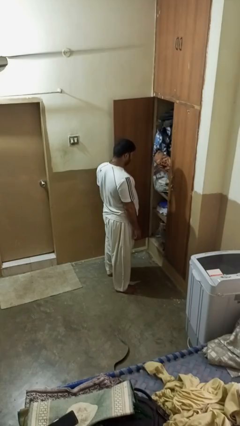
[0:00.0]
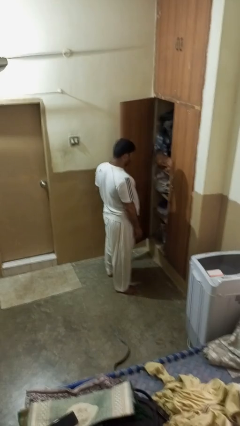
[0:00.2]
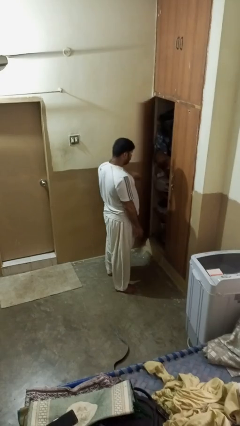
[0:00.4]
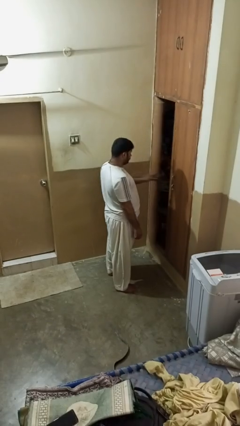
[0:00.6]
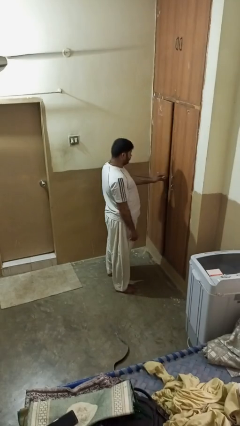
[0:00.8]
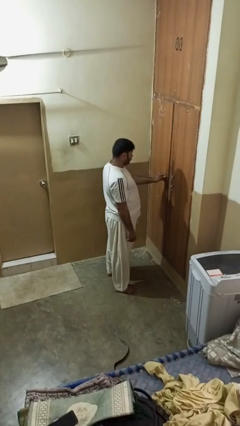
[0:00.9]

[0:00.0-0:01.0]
person closes closet door

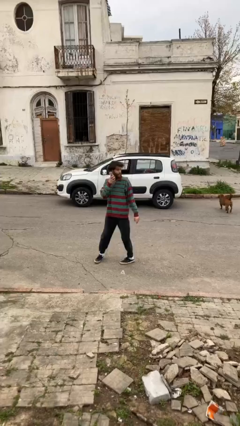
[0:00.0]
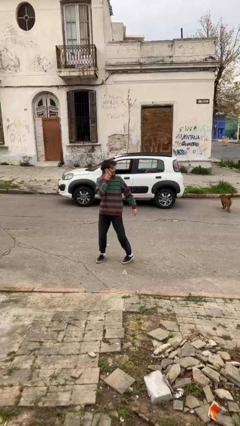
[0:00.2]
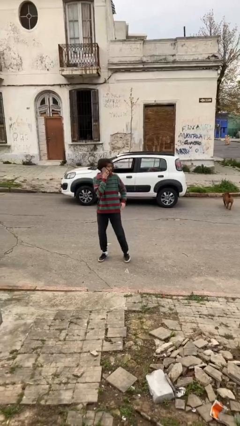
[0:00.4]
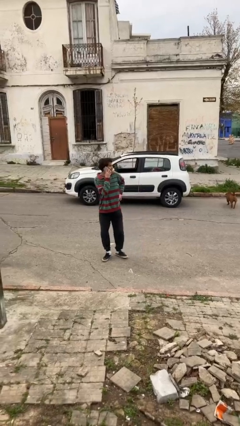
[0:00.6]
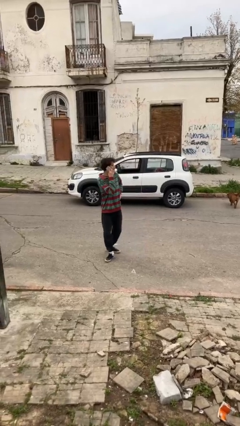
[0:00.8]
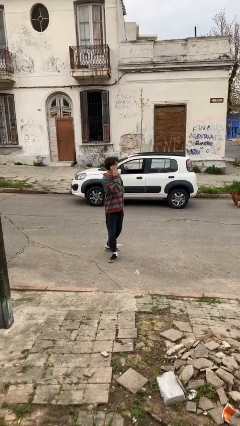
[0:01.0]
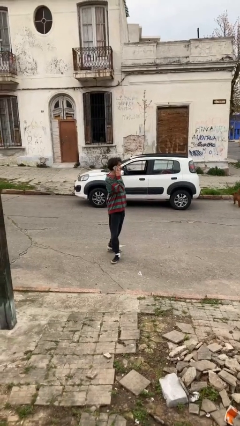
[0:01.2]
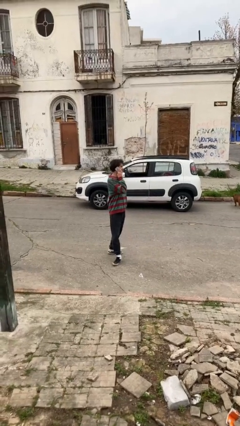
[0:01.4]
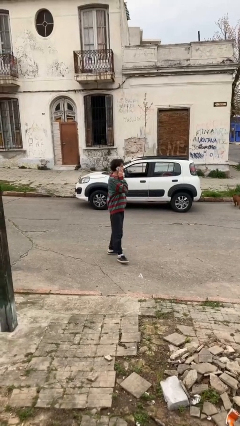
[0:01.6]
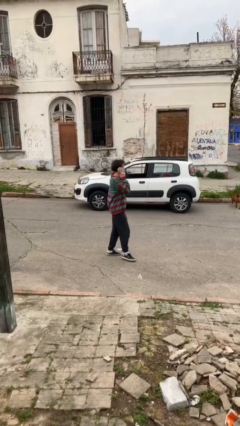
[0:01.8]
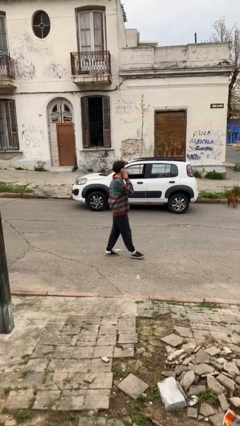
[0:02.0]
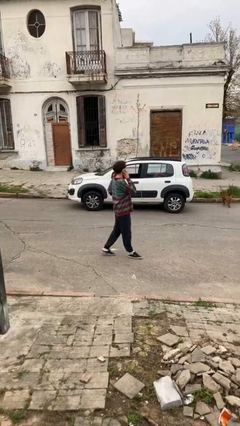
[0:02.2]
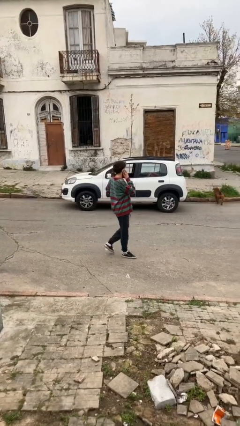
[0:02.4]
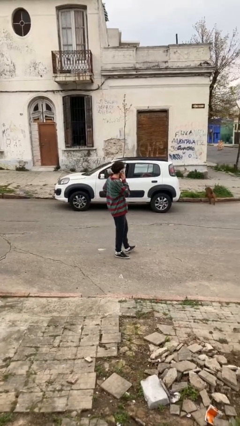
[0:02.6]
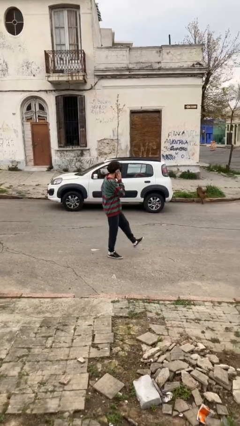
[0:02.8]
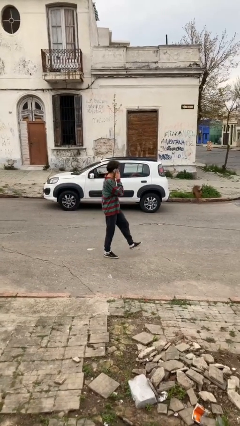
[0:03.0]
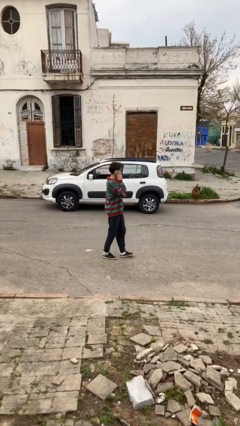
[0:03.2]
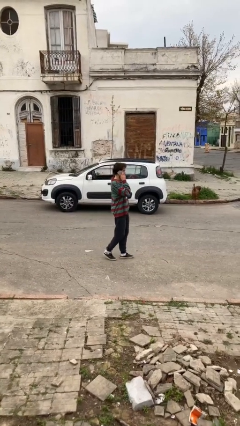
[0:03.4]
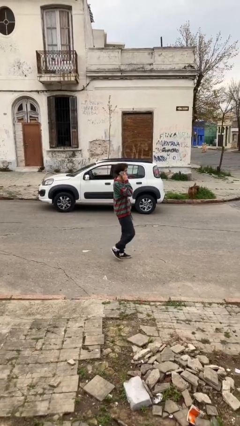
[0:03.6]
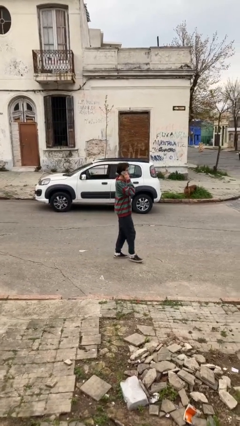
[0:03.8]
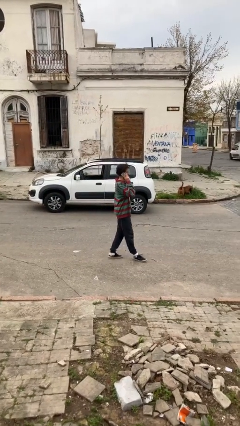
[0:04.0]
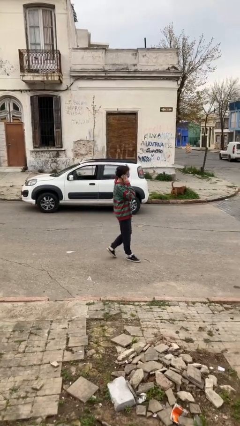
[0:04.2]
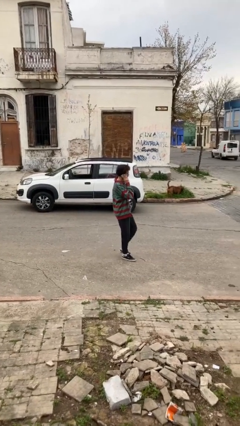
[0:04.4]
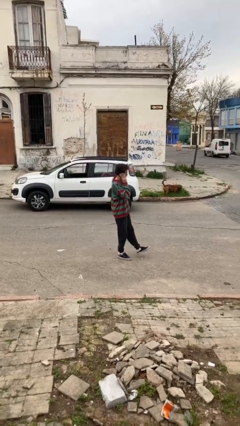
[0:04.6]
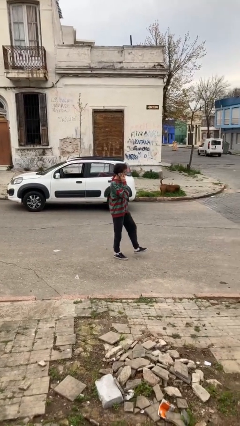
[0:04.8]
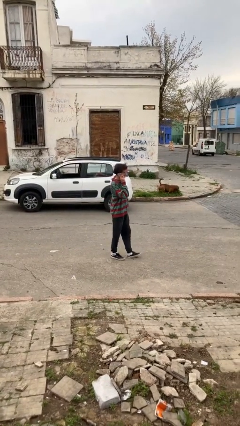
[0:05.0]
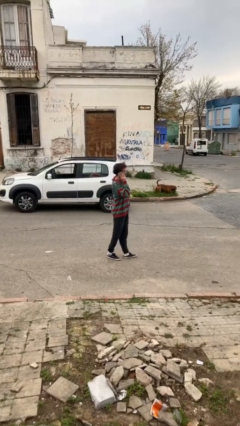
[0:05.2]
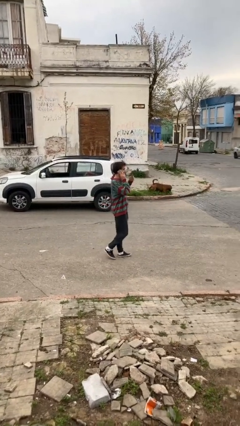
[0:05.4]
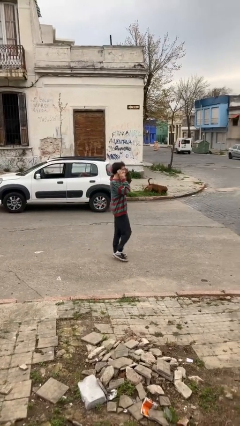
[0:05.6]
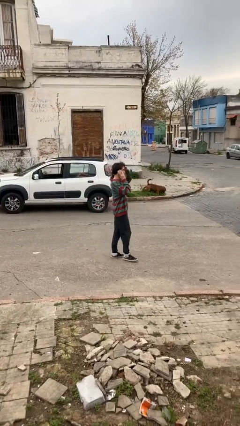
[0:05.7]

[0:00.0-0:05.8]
person talks on phone

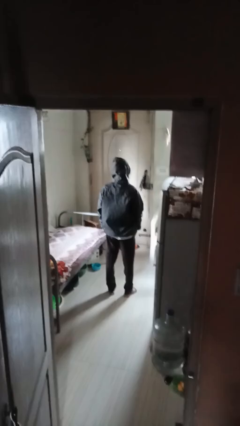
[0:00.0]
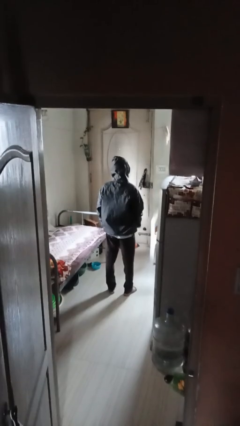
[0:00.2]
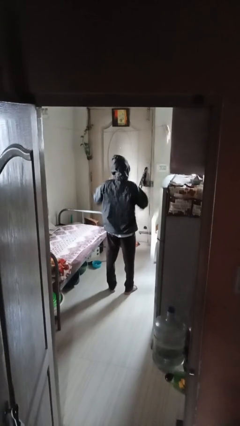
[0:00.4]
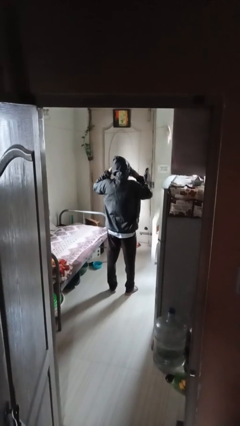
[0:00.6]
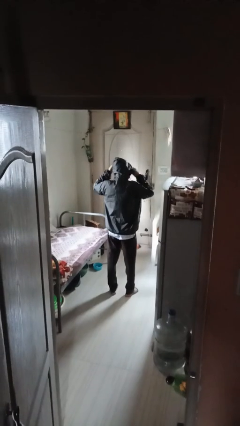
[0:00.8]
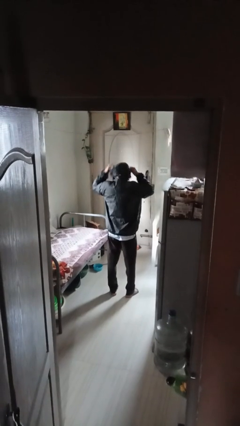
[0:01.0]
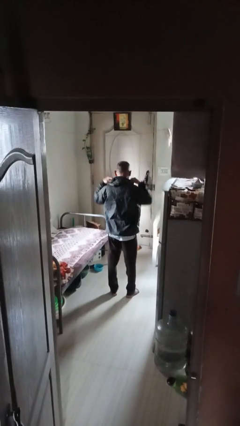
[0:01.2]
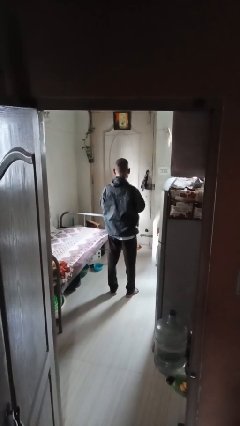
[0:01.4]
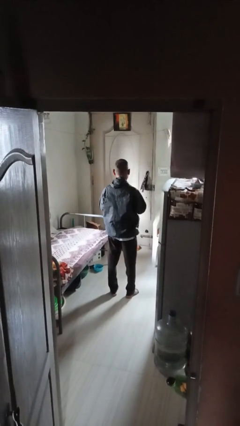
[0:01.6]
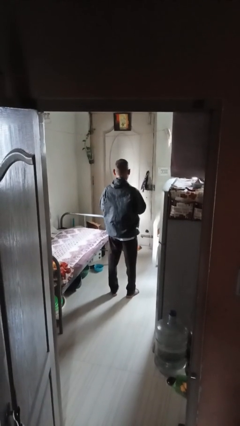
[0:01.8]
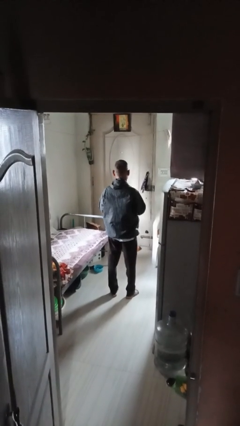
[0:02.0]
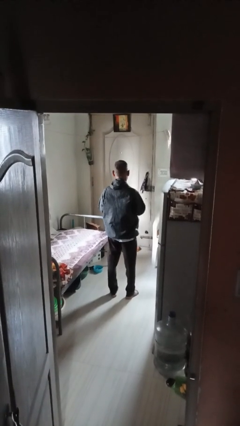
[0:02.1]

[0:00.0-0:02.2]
person takes off hoodie

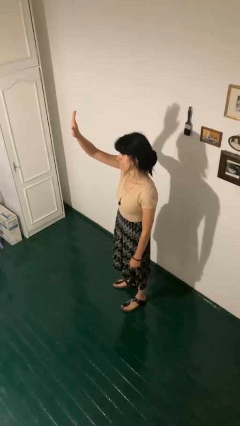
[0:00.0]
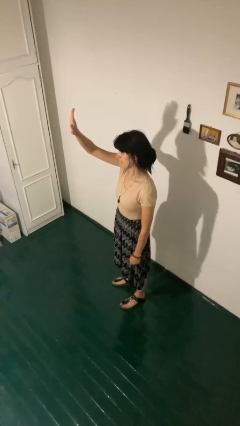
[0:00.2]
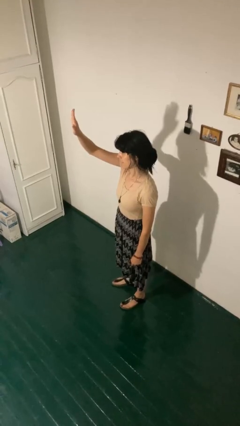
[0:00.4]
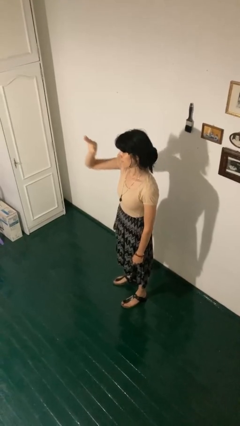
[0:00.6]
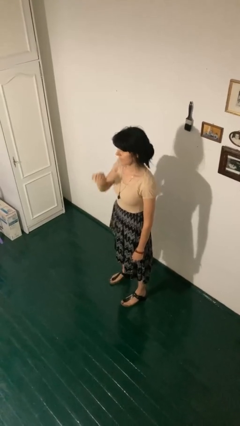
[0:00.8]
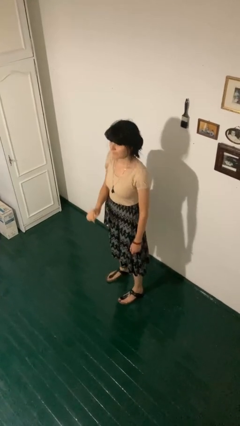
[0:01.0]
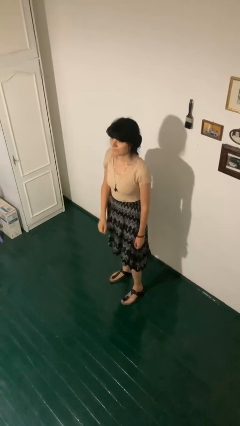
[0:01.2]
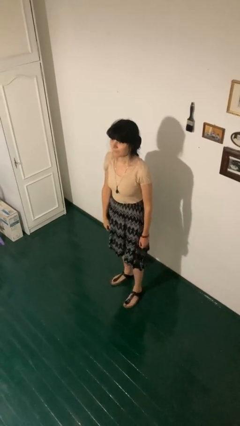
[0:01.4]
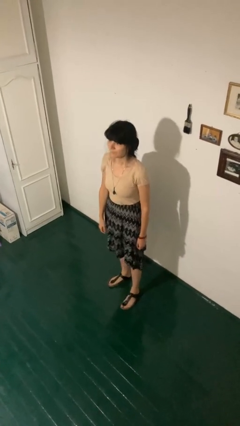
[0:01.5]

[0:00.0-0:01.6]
person gestures lower hand

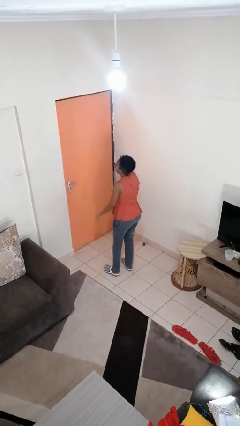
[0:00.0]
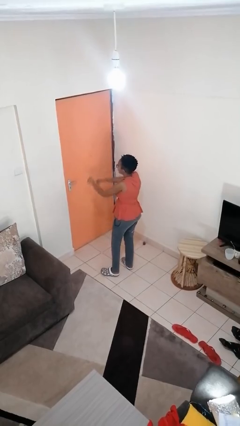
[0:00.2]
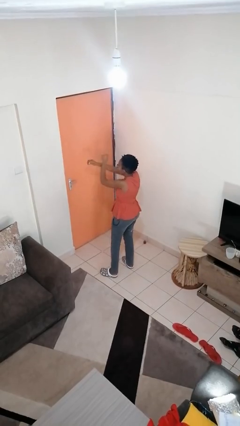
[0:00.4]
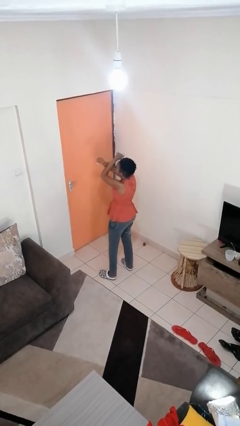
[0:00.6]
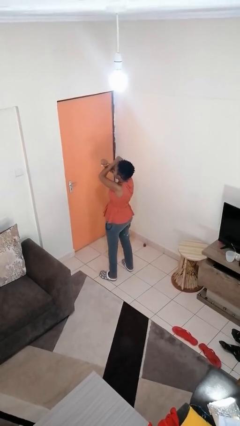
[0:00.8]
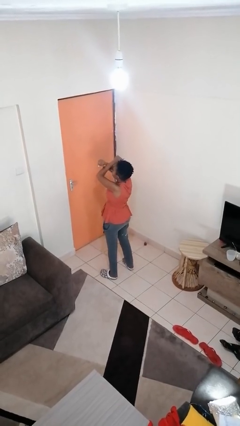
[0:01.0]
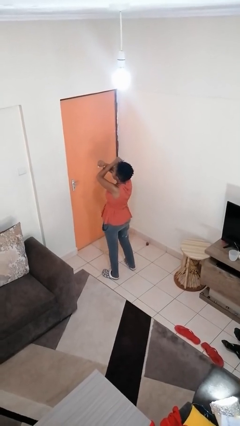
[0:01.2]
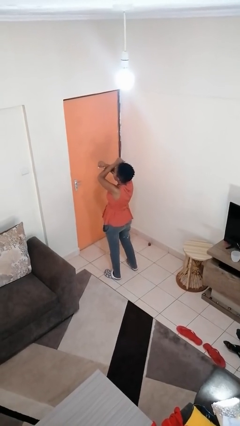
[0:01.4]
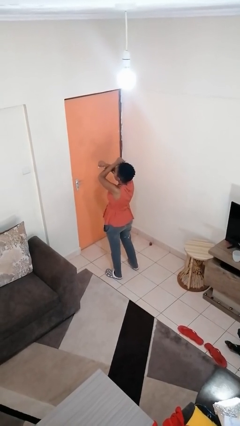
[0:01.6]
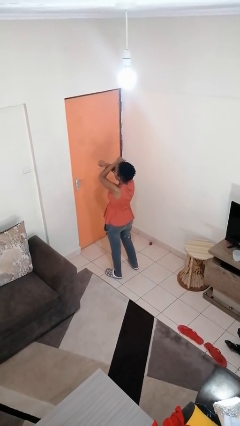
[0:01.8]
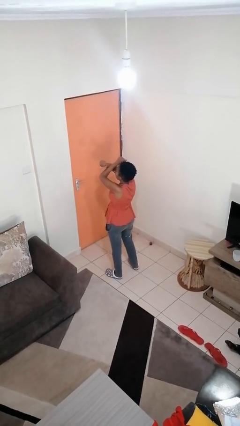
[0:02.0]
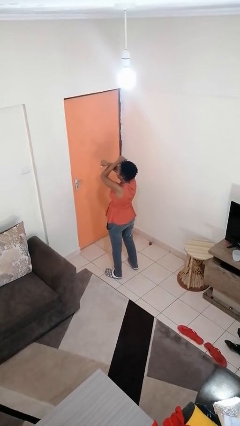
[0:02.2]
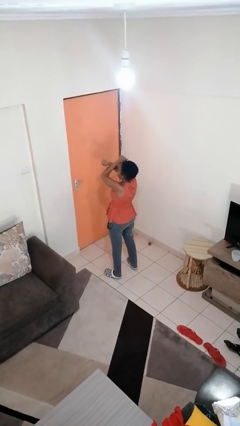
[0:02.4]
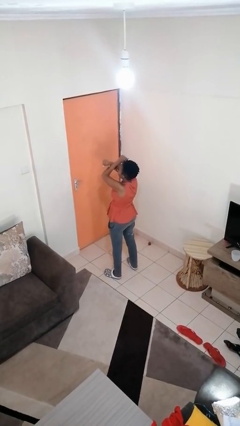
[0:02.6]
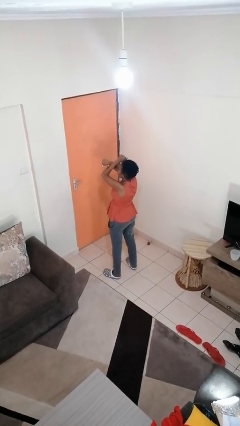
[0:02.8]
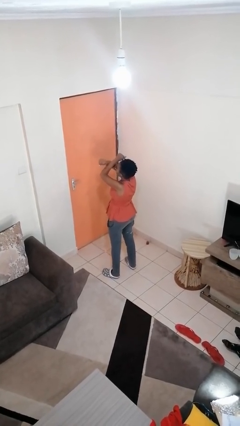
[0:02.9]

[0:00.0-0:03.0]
person gestures arms x

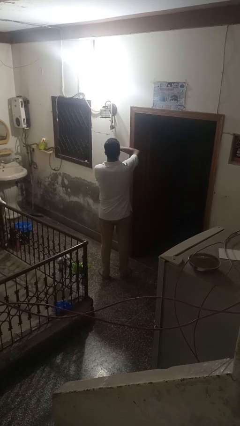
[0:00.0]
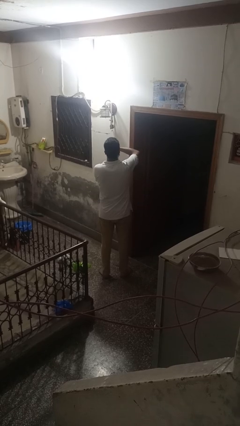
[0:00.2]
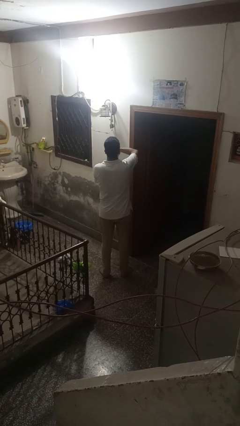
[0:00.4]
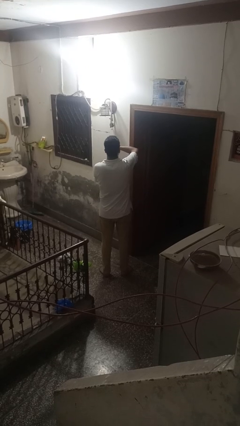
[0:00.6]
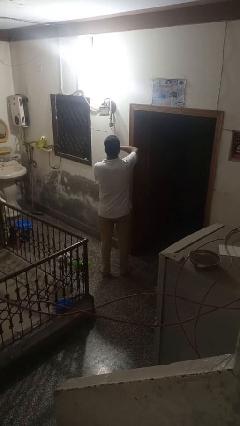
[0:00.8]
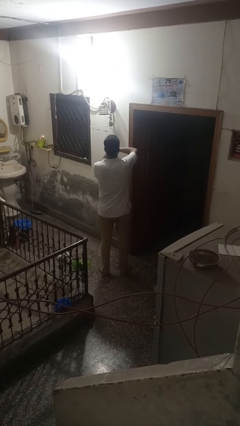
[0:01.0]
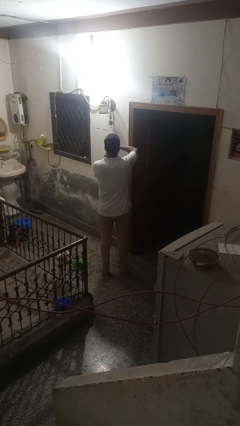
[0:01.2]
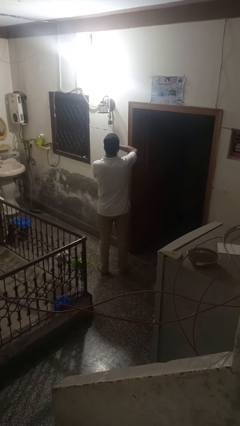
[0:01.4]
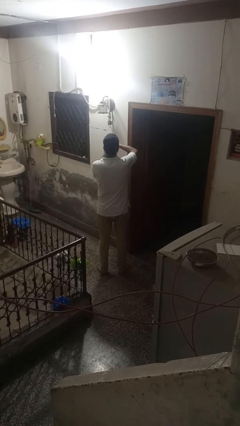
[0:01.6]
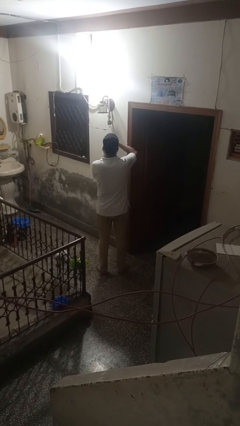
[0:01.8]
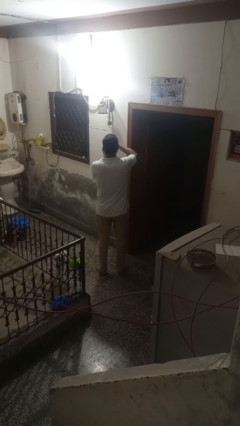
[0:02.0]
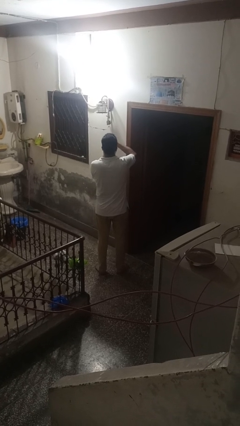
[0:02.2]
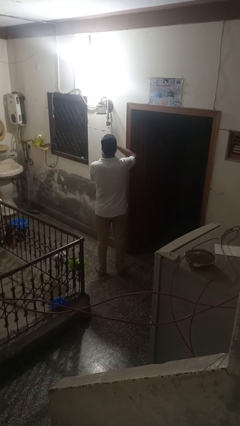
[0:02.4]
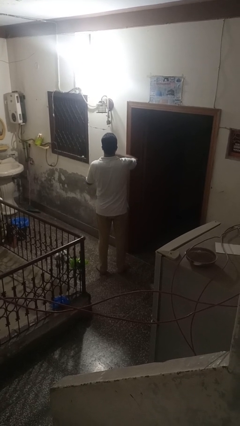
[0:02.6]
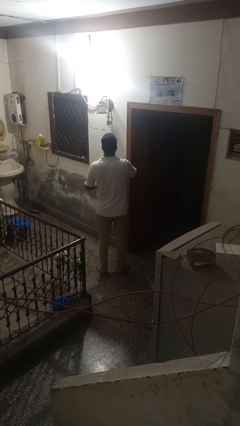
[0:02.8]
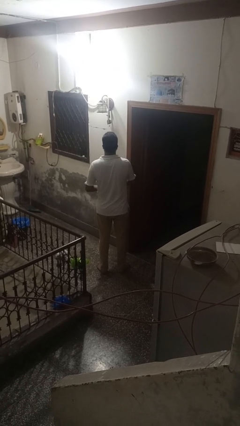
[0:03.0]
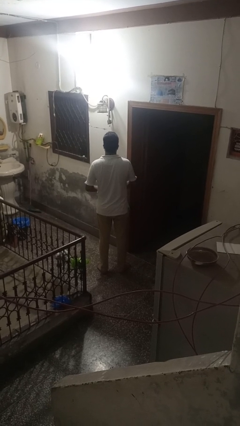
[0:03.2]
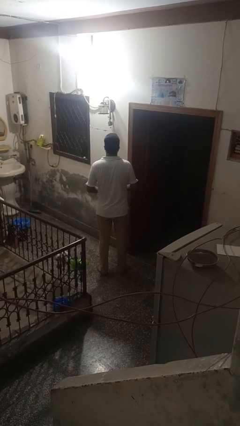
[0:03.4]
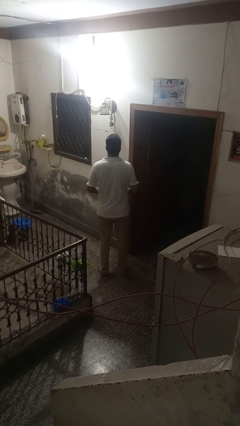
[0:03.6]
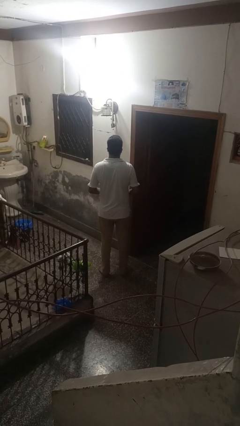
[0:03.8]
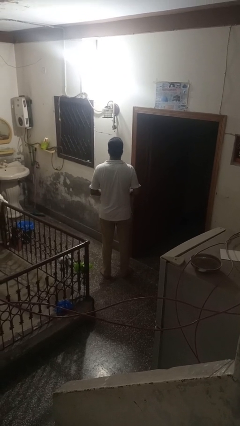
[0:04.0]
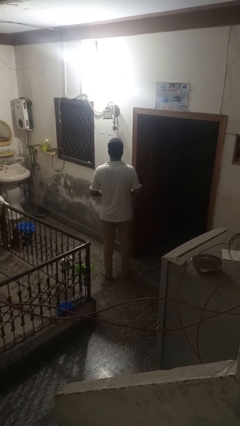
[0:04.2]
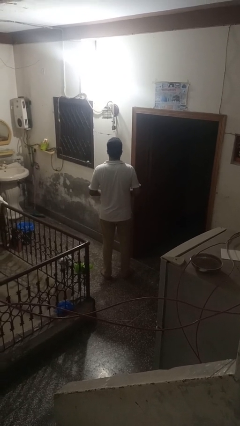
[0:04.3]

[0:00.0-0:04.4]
person takes off wristwatch
